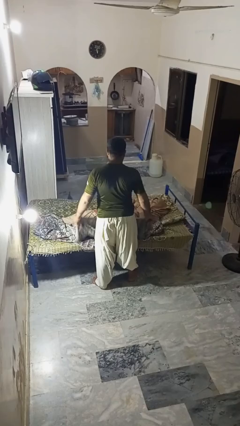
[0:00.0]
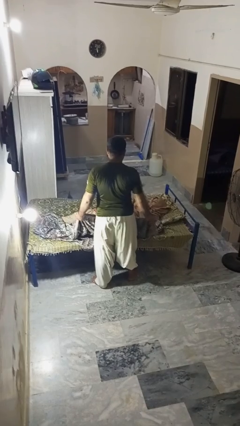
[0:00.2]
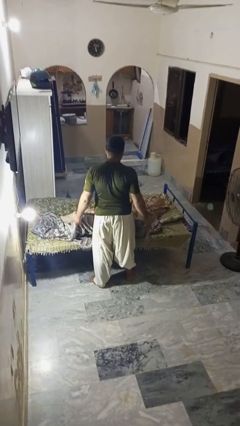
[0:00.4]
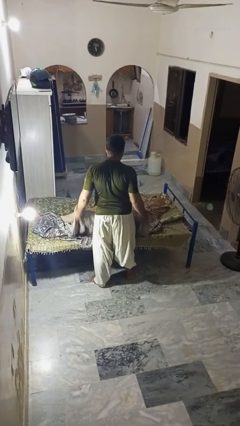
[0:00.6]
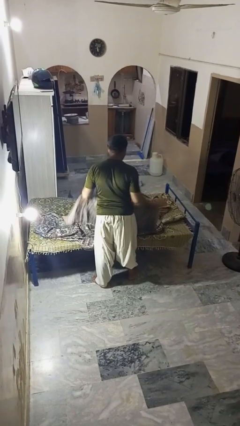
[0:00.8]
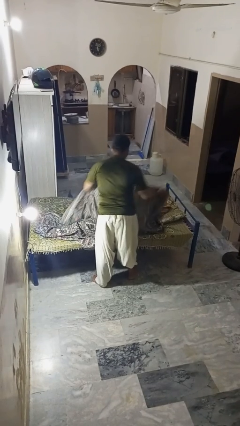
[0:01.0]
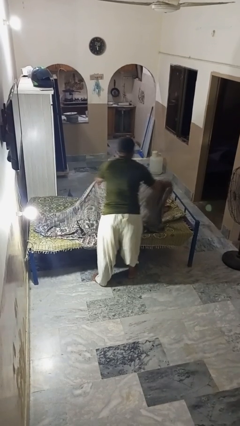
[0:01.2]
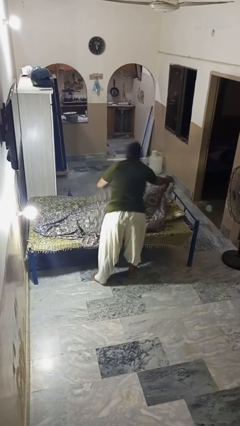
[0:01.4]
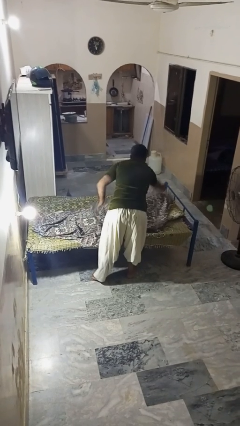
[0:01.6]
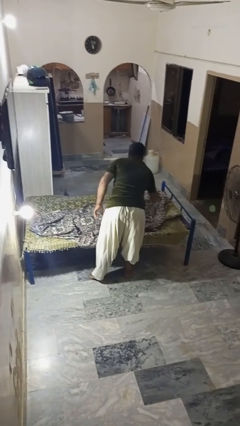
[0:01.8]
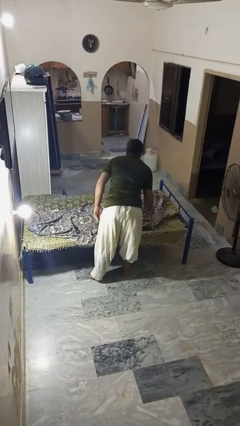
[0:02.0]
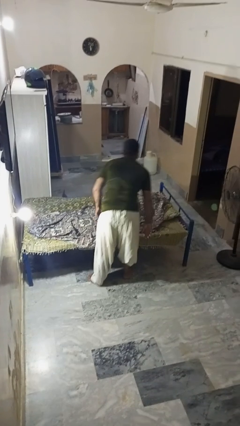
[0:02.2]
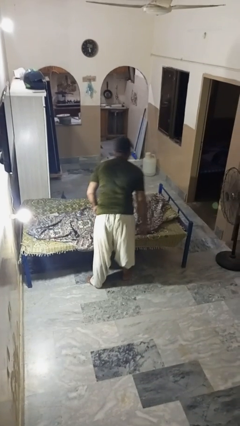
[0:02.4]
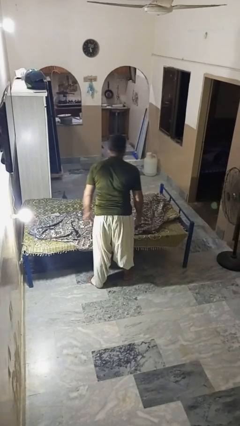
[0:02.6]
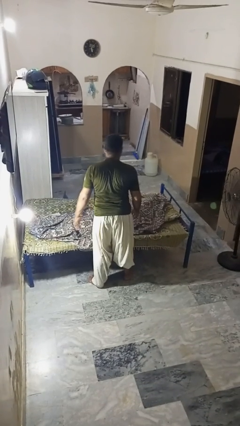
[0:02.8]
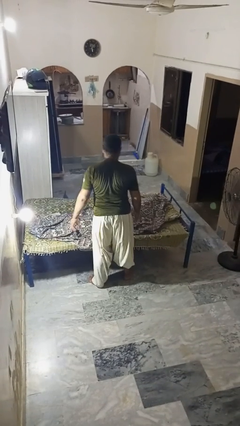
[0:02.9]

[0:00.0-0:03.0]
person covers friend with blanket

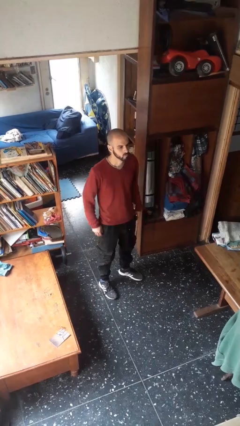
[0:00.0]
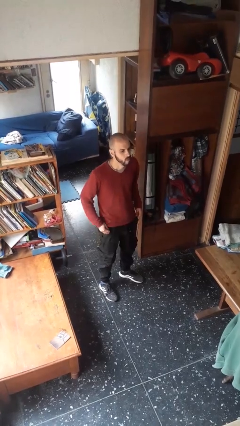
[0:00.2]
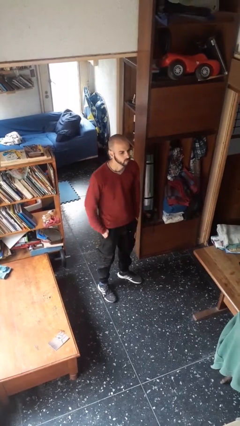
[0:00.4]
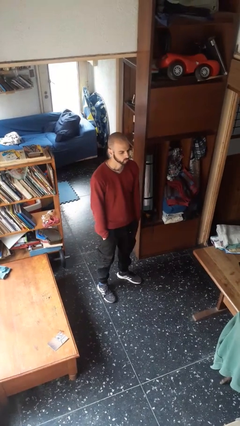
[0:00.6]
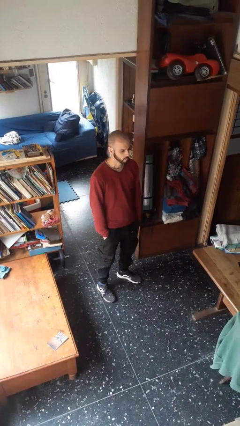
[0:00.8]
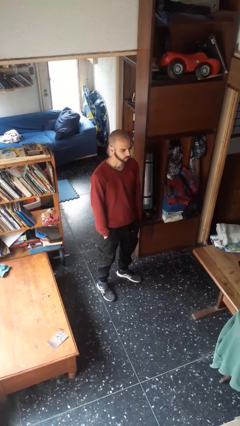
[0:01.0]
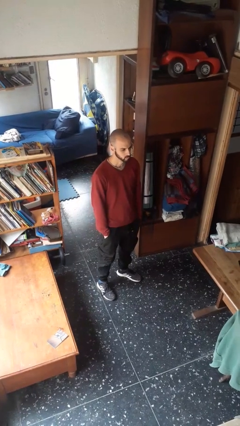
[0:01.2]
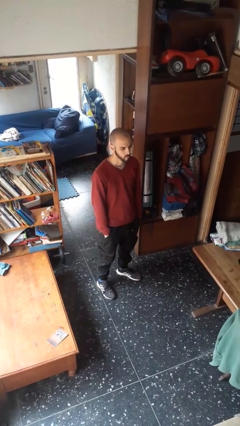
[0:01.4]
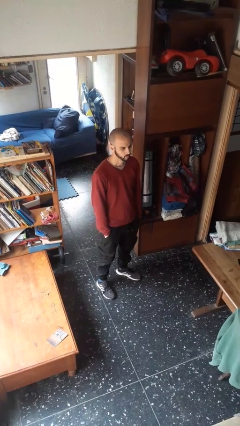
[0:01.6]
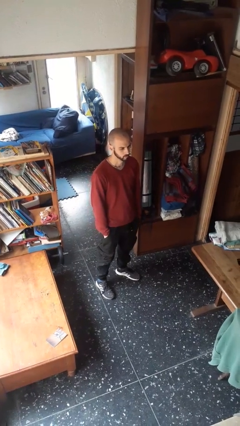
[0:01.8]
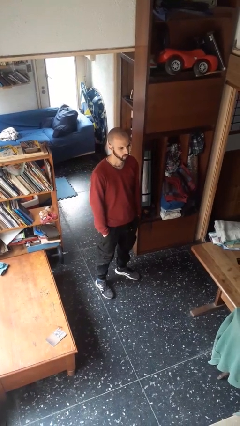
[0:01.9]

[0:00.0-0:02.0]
person puts hands in back pockets

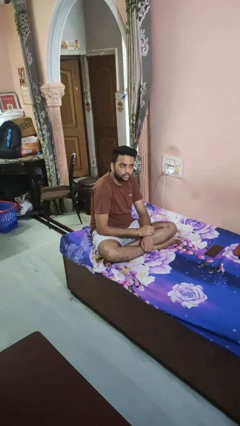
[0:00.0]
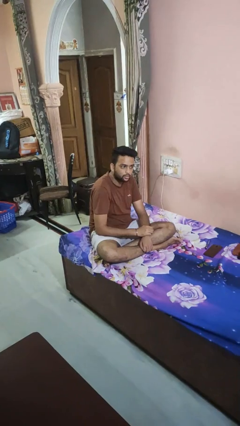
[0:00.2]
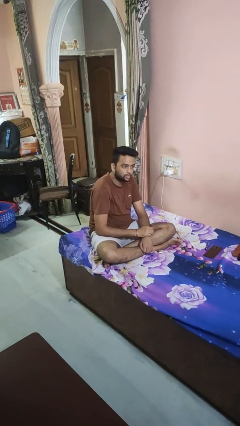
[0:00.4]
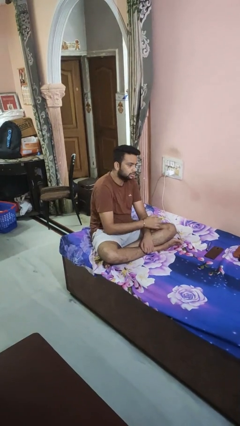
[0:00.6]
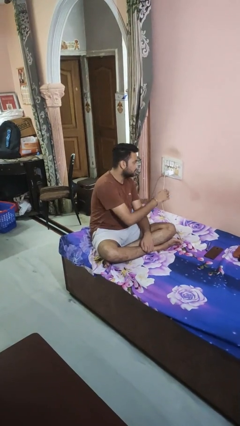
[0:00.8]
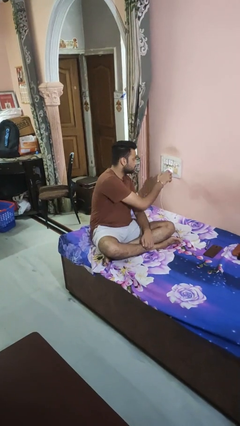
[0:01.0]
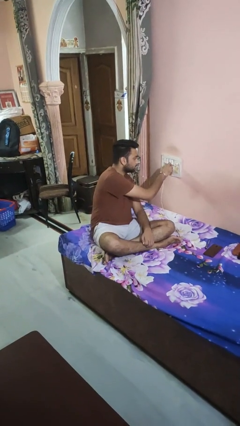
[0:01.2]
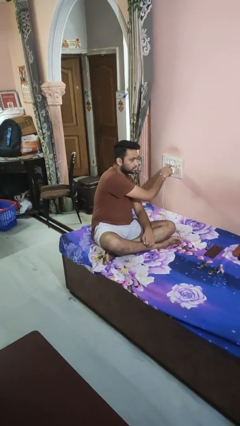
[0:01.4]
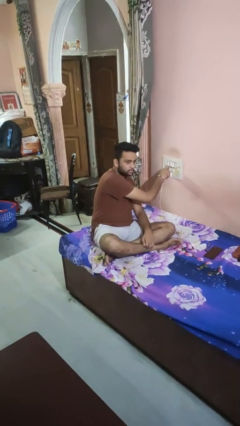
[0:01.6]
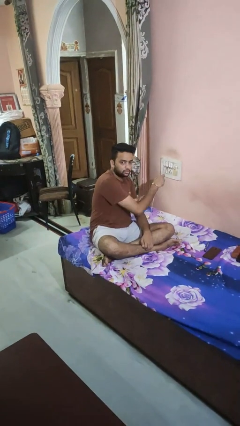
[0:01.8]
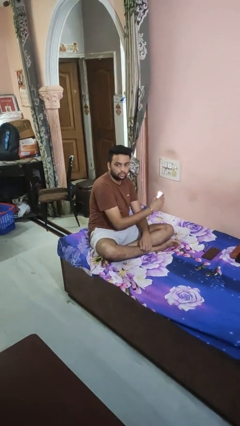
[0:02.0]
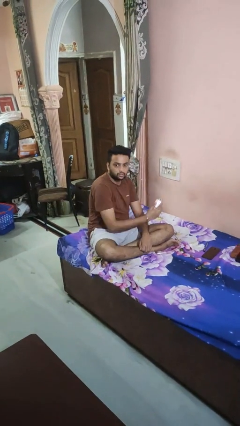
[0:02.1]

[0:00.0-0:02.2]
person unplugs from electrical socket

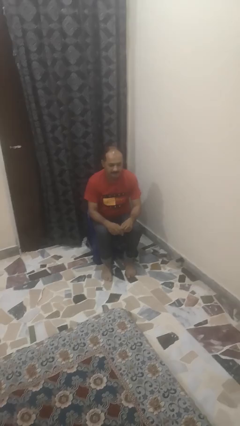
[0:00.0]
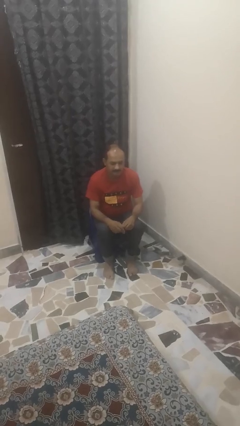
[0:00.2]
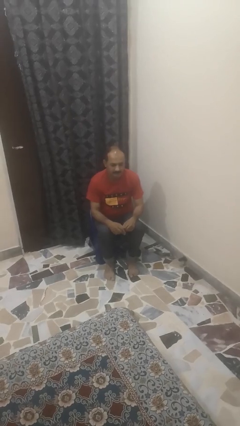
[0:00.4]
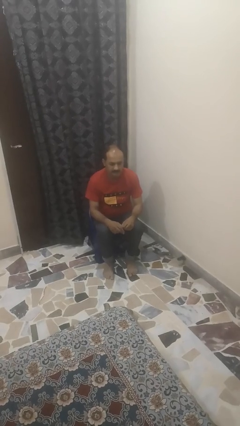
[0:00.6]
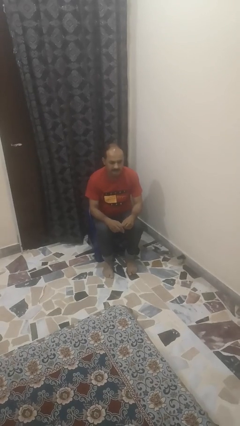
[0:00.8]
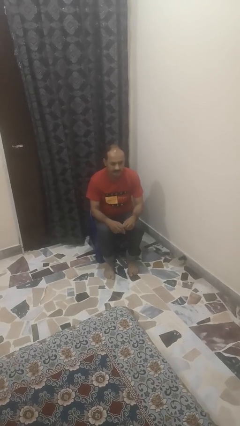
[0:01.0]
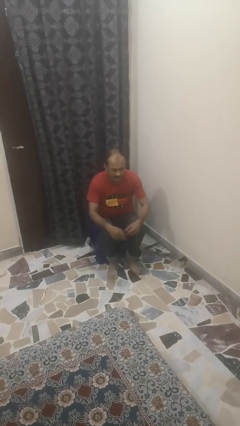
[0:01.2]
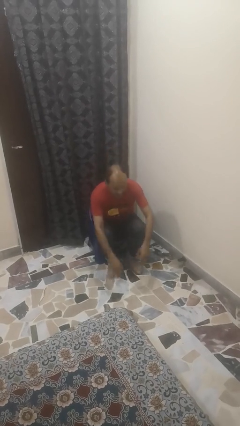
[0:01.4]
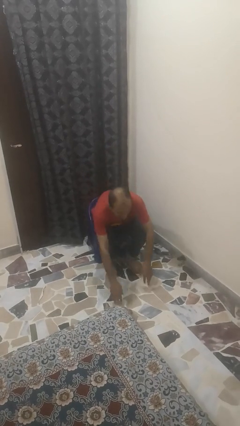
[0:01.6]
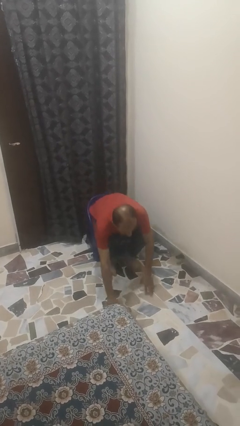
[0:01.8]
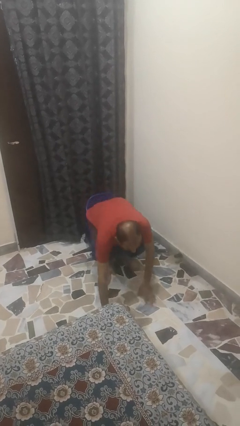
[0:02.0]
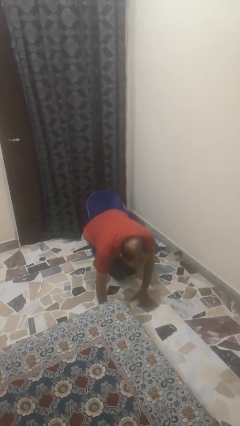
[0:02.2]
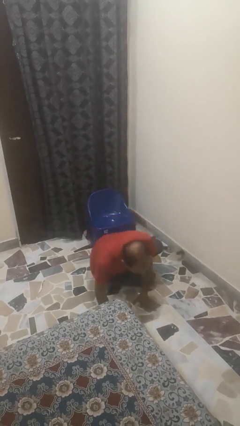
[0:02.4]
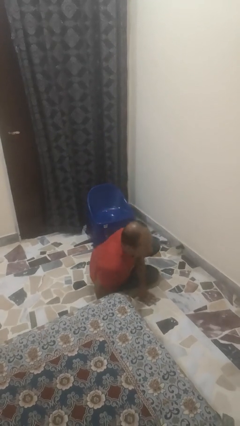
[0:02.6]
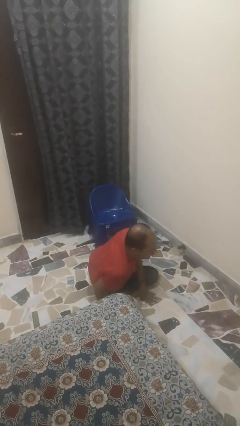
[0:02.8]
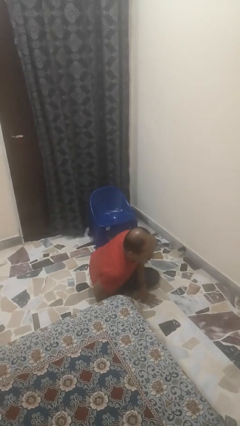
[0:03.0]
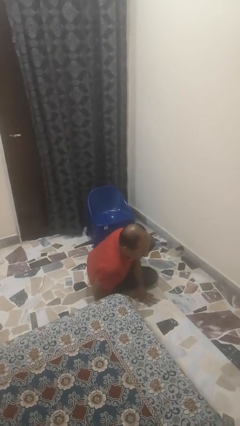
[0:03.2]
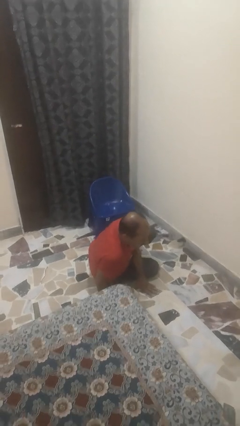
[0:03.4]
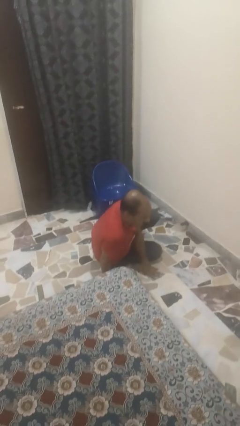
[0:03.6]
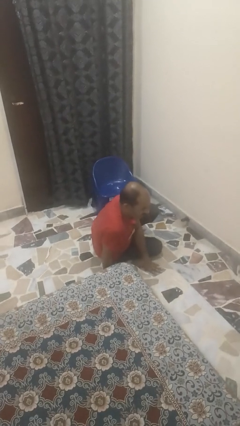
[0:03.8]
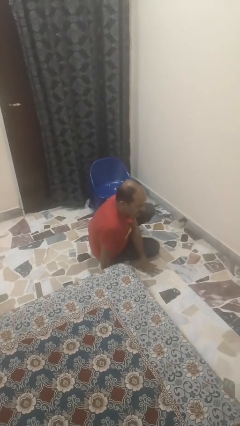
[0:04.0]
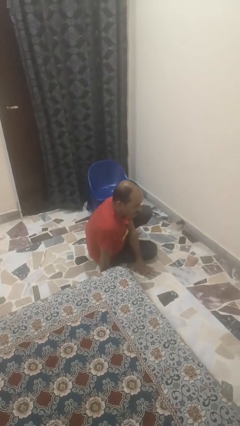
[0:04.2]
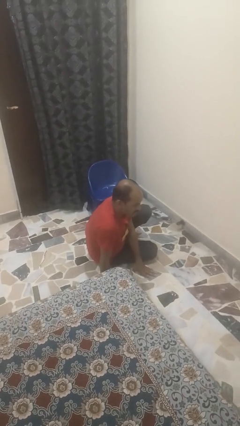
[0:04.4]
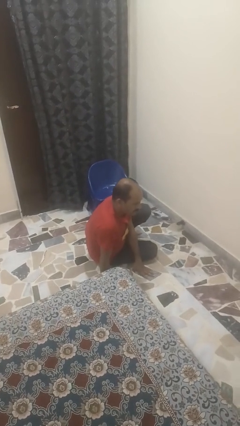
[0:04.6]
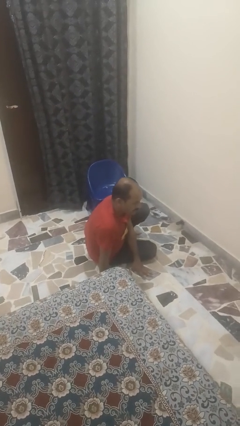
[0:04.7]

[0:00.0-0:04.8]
person falls from chair

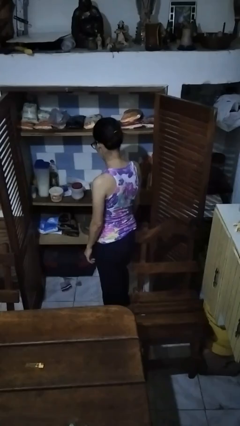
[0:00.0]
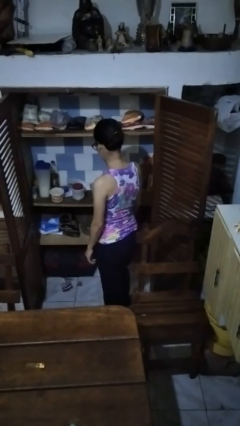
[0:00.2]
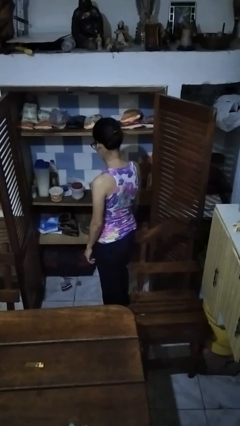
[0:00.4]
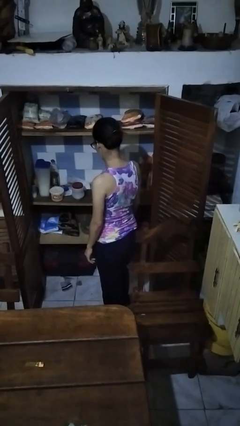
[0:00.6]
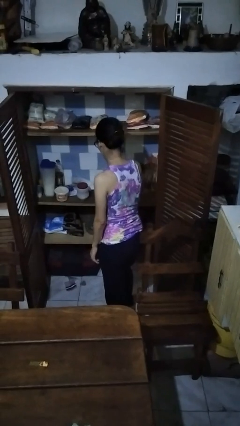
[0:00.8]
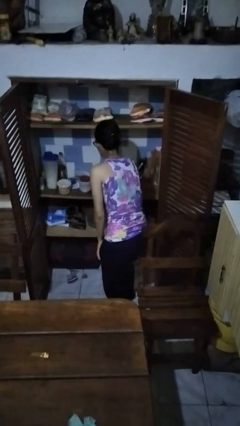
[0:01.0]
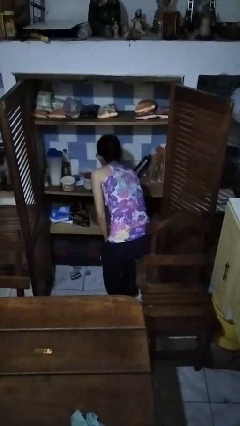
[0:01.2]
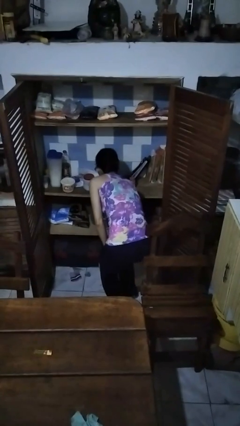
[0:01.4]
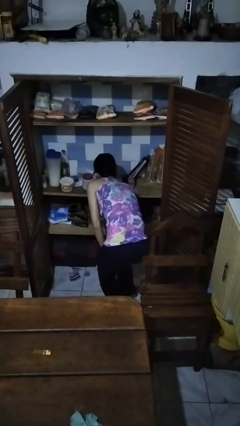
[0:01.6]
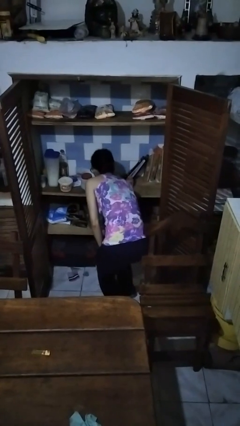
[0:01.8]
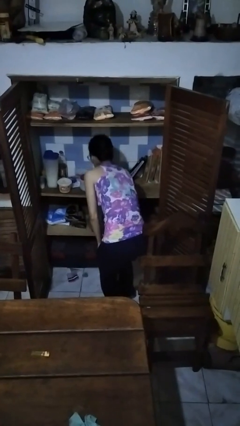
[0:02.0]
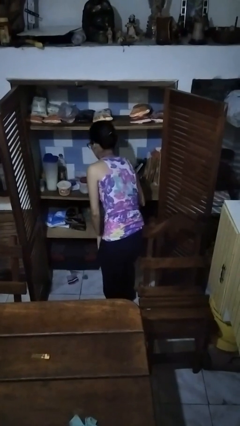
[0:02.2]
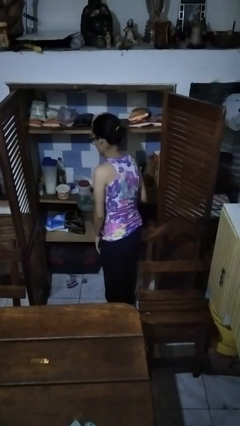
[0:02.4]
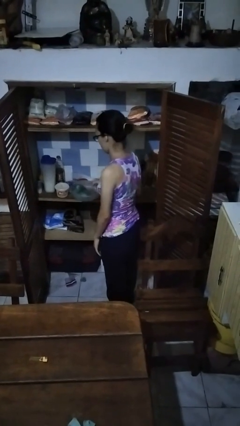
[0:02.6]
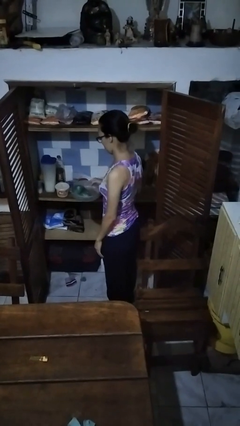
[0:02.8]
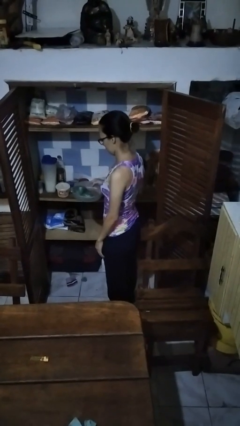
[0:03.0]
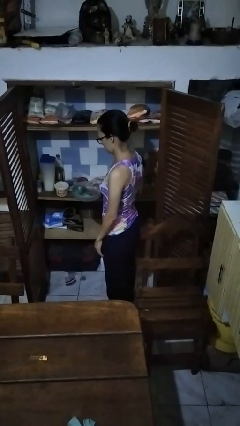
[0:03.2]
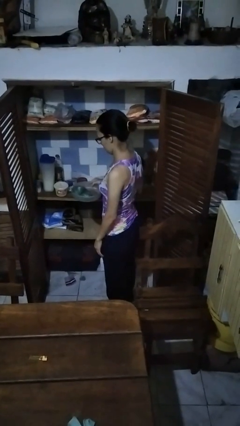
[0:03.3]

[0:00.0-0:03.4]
person takes object from cabinet

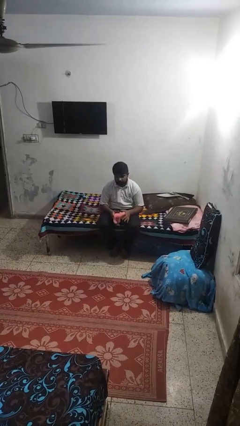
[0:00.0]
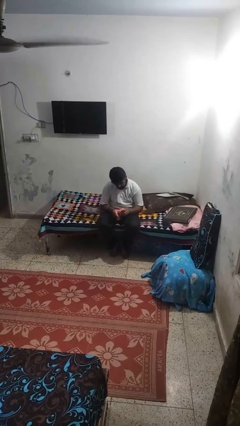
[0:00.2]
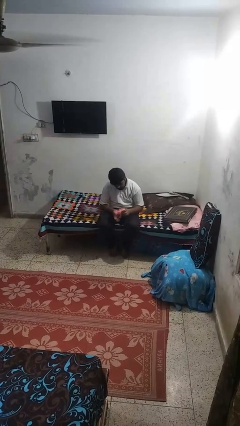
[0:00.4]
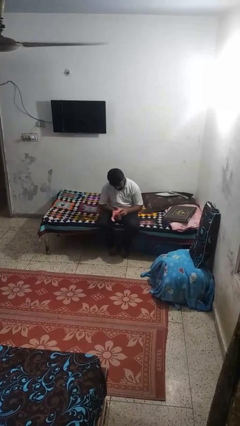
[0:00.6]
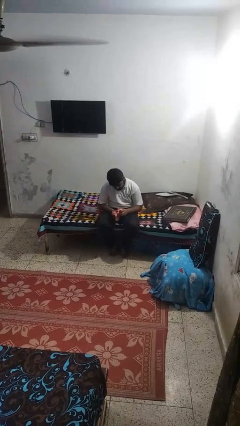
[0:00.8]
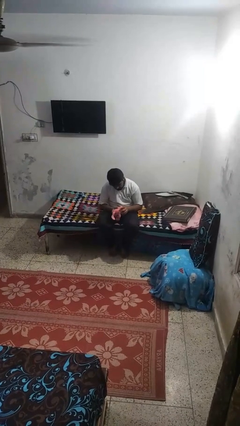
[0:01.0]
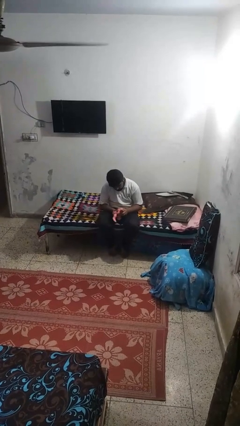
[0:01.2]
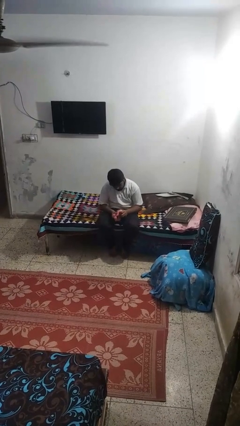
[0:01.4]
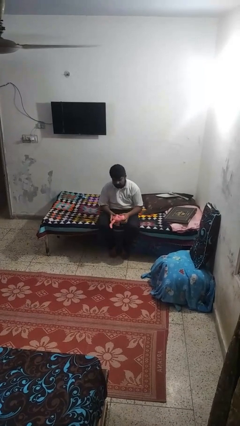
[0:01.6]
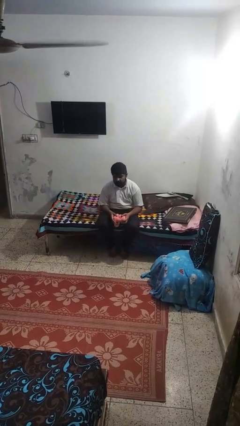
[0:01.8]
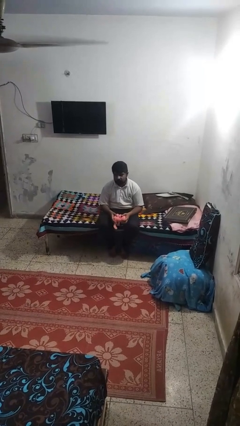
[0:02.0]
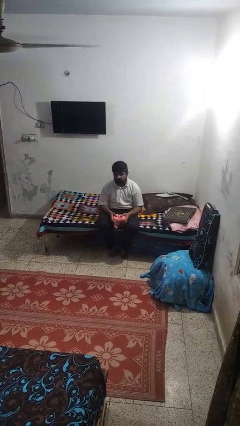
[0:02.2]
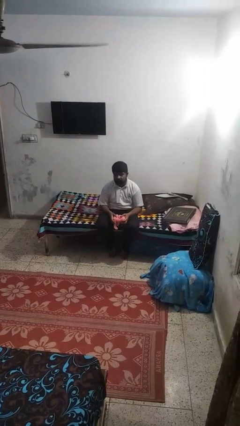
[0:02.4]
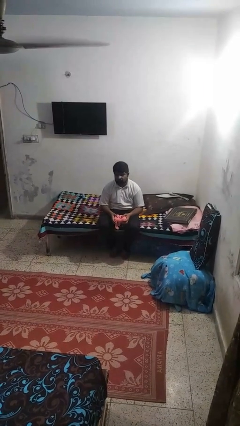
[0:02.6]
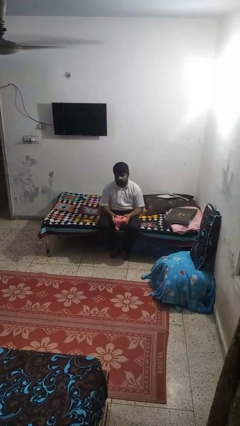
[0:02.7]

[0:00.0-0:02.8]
person squeezes object
